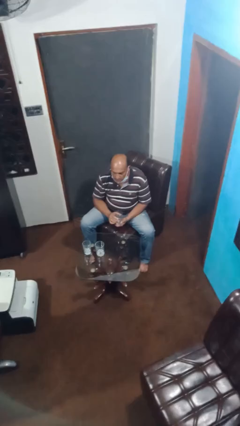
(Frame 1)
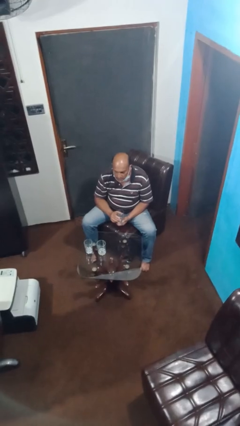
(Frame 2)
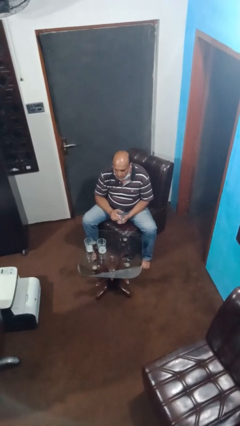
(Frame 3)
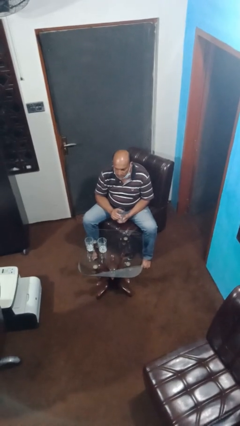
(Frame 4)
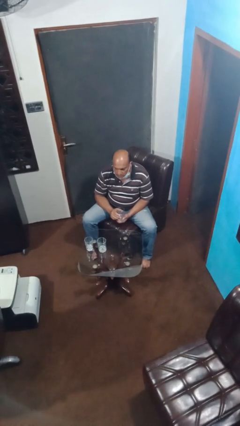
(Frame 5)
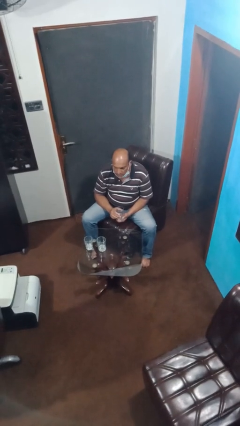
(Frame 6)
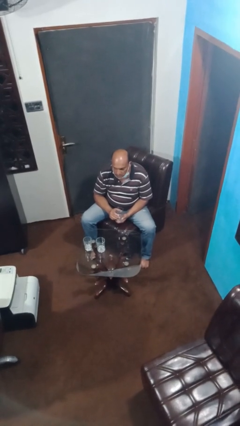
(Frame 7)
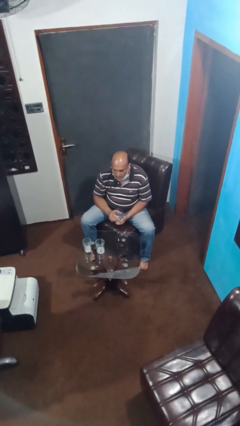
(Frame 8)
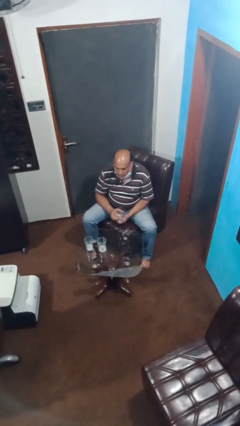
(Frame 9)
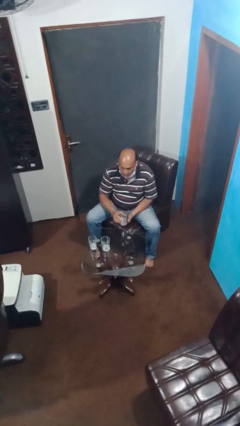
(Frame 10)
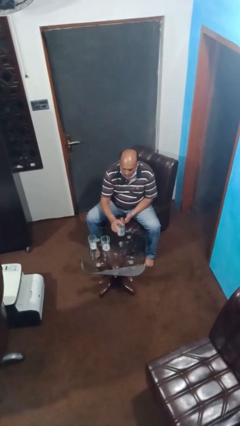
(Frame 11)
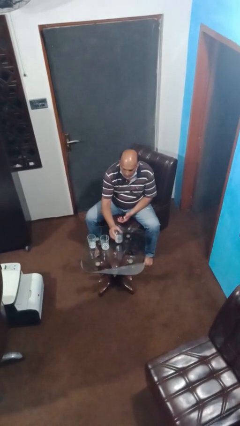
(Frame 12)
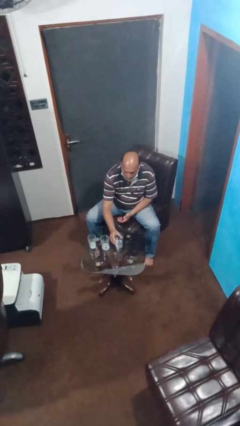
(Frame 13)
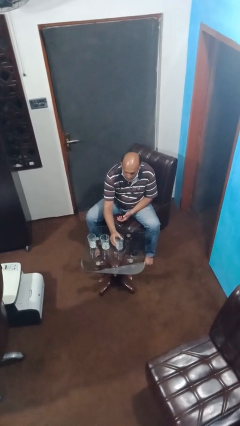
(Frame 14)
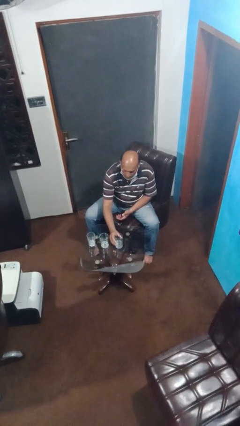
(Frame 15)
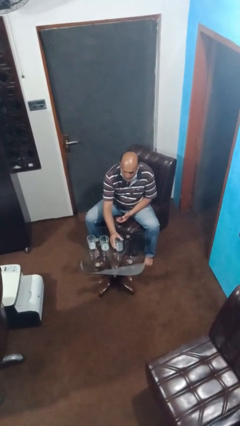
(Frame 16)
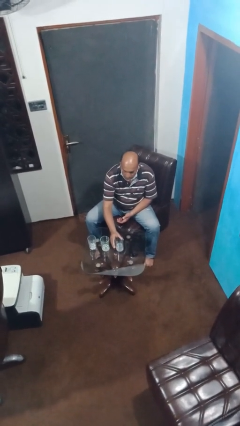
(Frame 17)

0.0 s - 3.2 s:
person puts down object on table

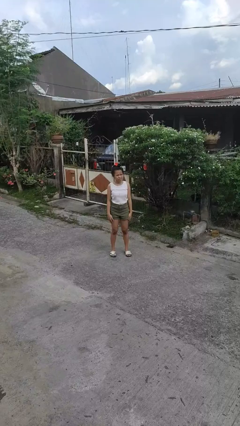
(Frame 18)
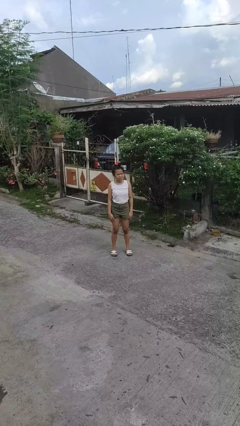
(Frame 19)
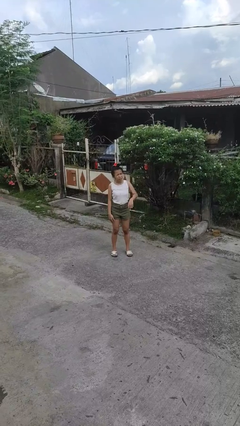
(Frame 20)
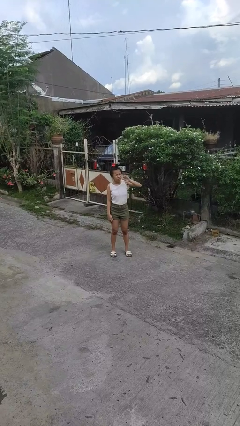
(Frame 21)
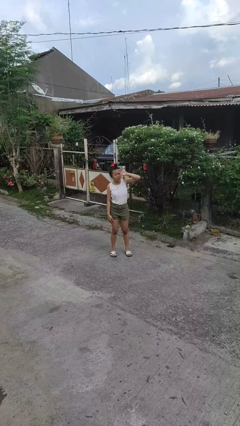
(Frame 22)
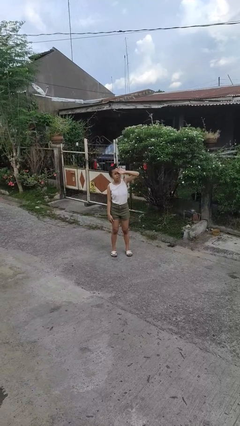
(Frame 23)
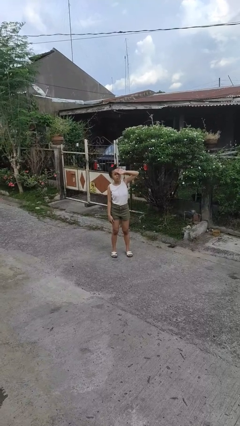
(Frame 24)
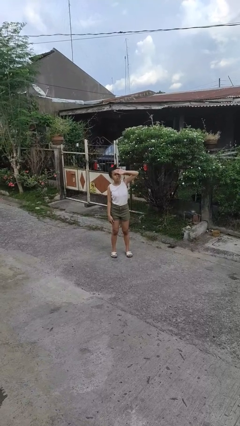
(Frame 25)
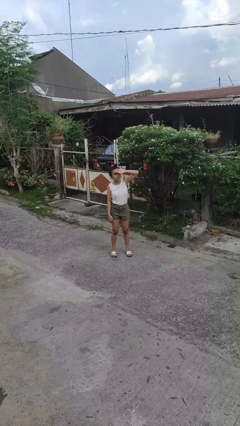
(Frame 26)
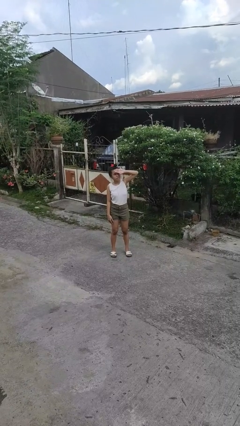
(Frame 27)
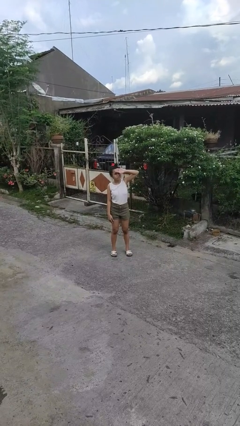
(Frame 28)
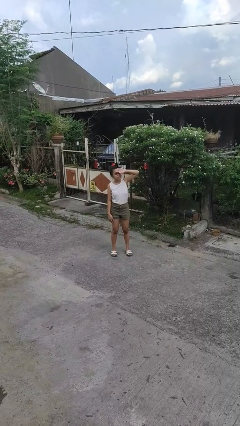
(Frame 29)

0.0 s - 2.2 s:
person shades eyes

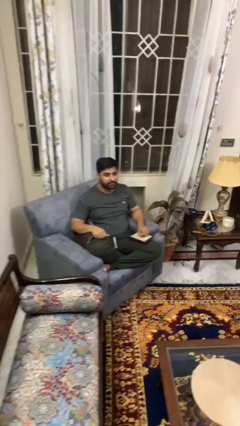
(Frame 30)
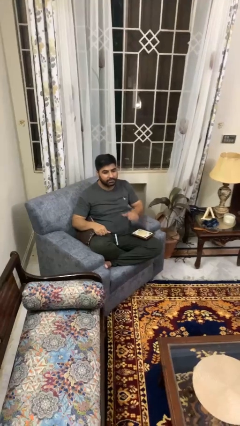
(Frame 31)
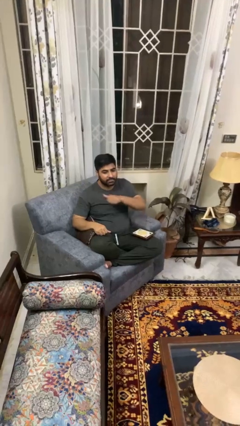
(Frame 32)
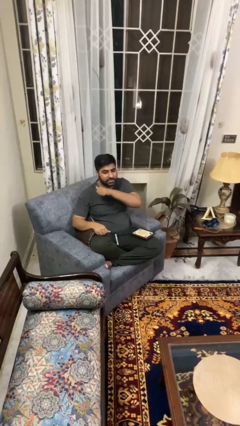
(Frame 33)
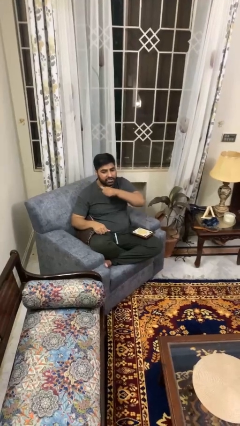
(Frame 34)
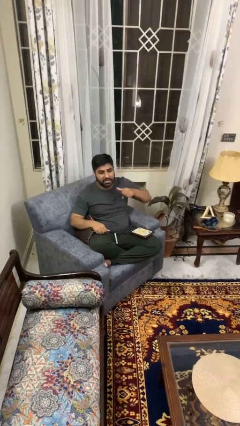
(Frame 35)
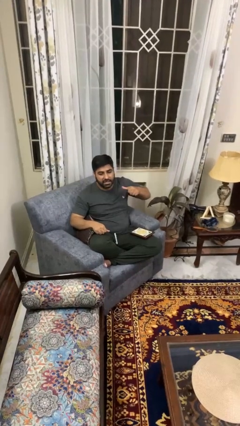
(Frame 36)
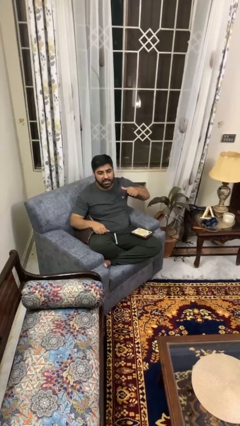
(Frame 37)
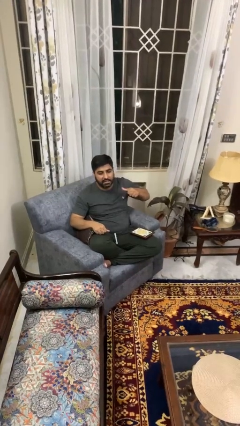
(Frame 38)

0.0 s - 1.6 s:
person gestures cut

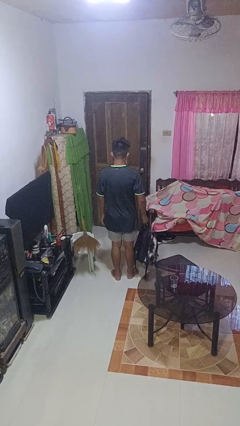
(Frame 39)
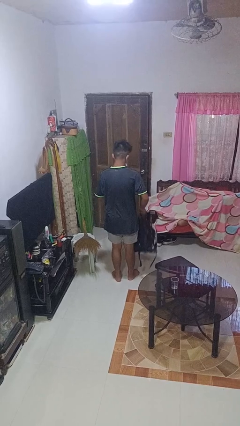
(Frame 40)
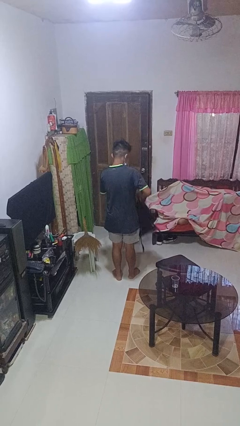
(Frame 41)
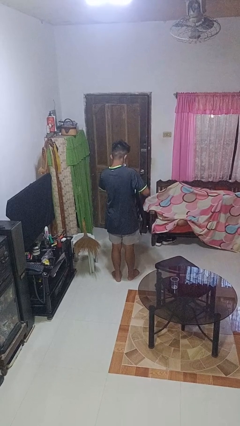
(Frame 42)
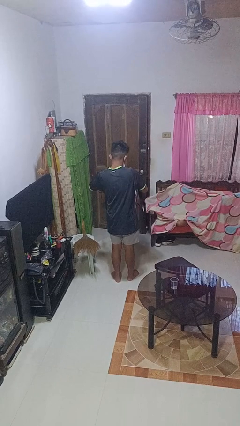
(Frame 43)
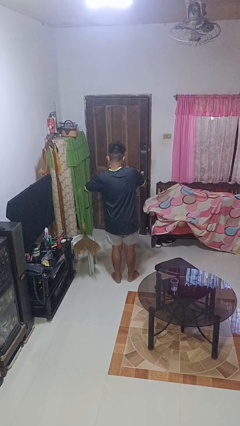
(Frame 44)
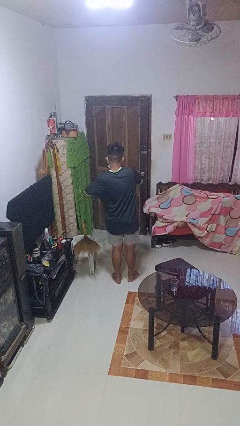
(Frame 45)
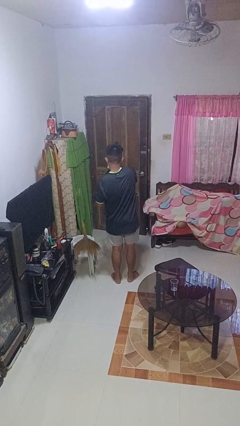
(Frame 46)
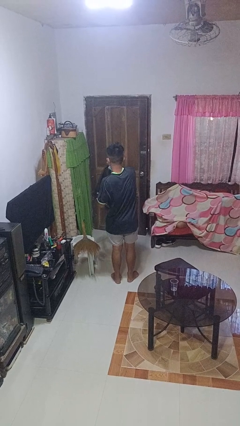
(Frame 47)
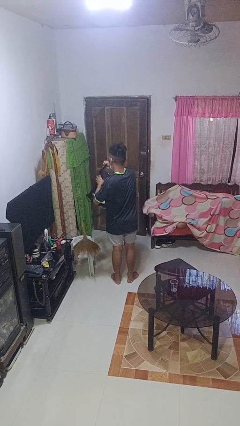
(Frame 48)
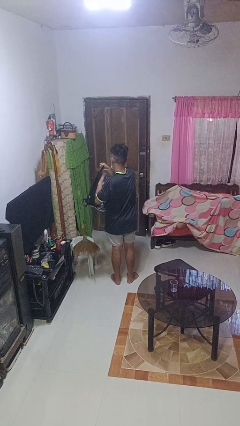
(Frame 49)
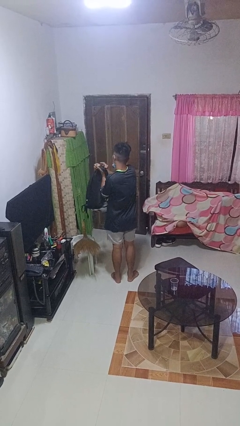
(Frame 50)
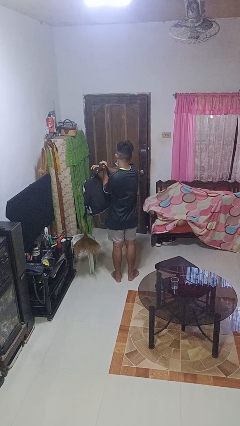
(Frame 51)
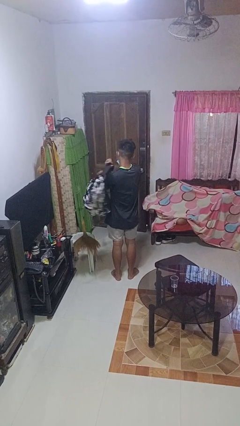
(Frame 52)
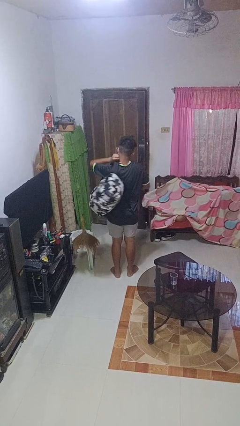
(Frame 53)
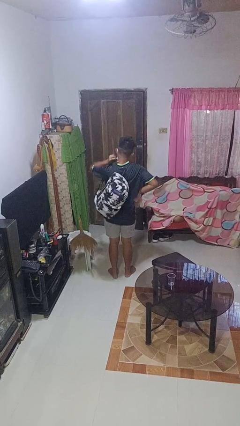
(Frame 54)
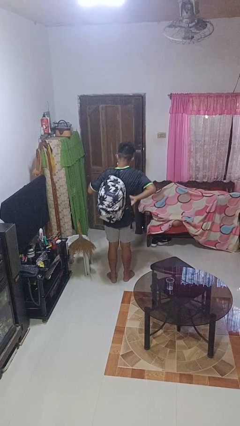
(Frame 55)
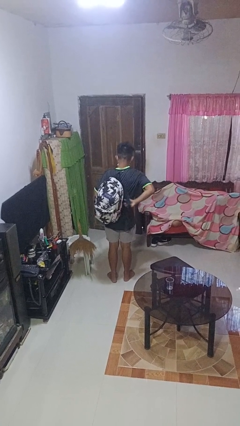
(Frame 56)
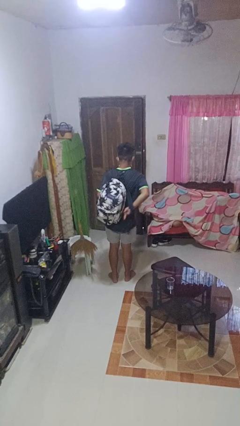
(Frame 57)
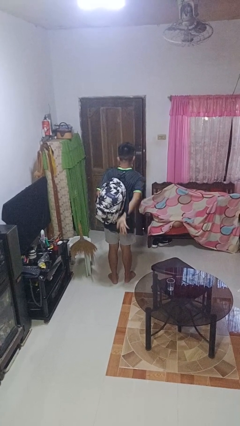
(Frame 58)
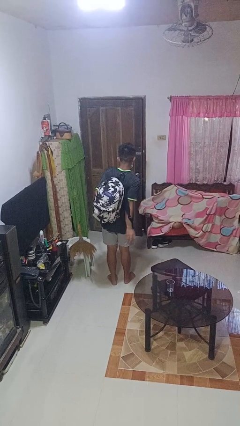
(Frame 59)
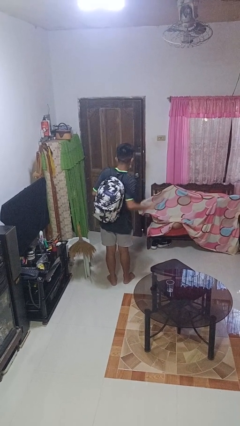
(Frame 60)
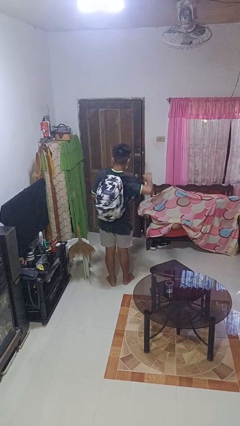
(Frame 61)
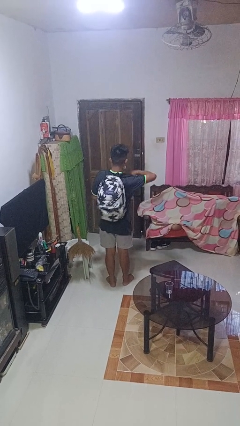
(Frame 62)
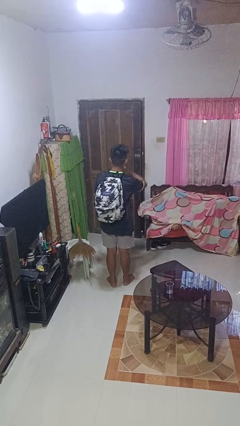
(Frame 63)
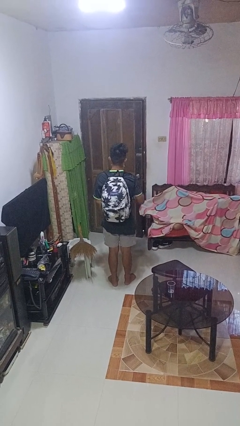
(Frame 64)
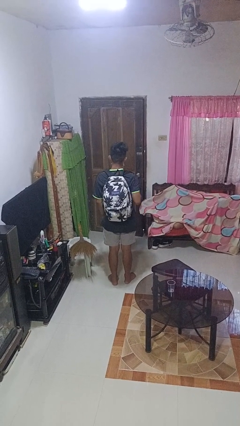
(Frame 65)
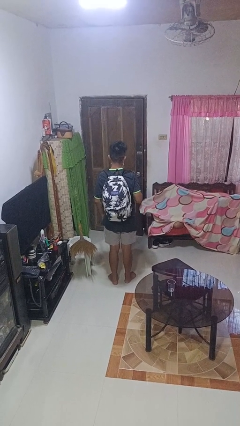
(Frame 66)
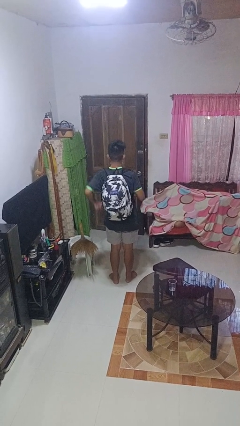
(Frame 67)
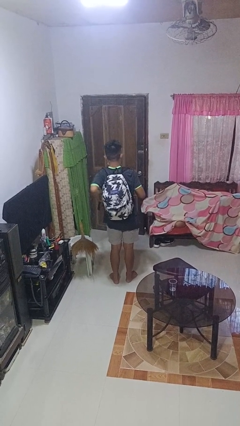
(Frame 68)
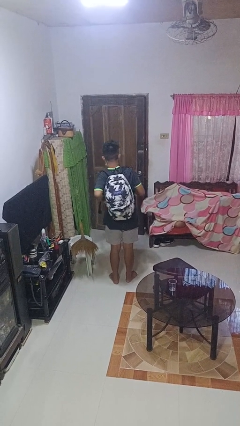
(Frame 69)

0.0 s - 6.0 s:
person puts on backpack

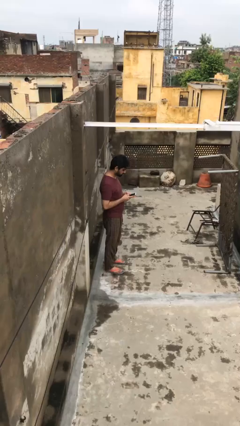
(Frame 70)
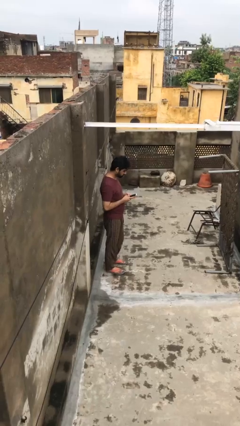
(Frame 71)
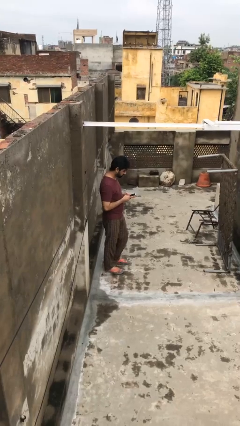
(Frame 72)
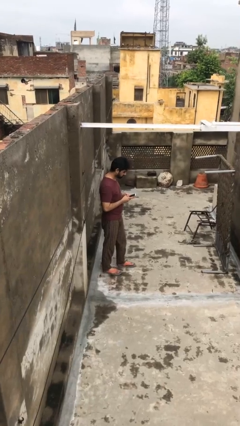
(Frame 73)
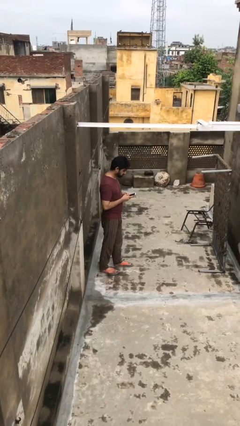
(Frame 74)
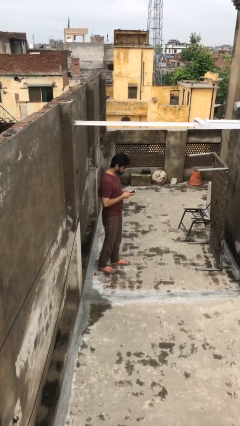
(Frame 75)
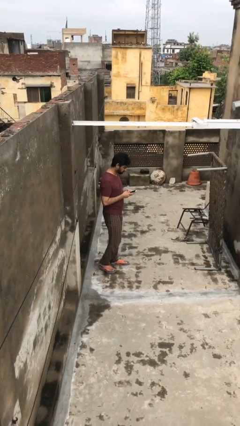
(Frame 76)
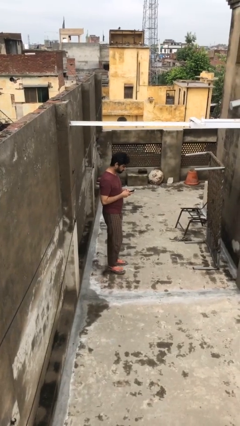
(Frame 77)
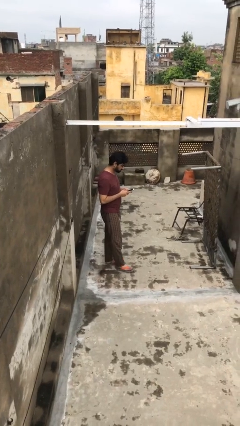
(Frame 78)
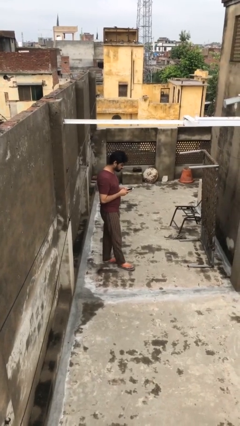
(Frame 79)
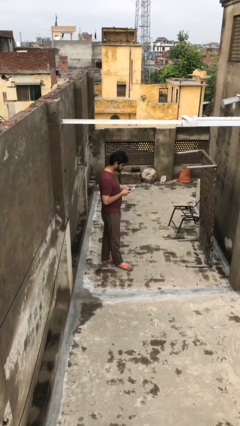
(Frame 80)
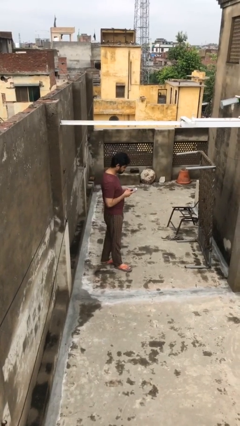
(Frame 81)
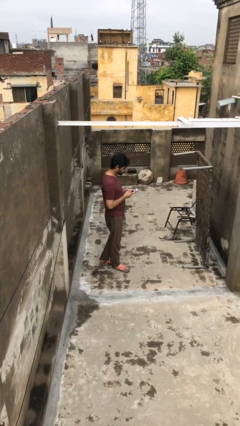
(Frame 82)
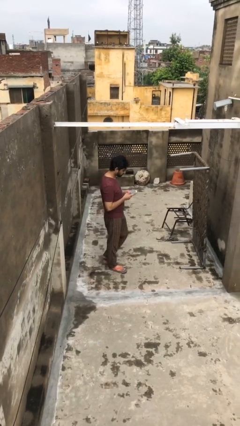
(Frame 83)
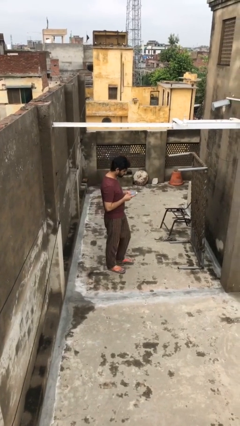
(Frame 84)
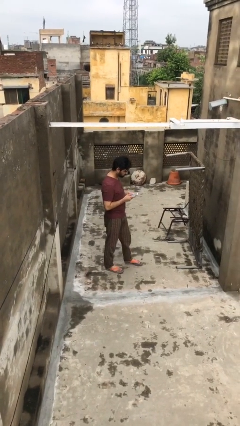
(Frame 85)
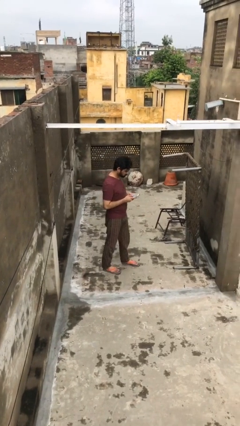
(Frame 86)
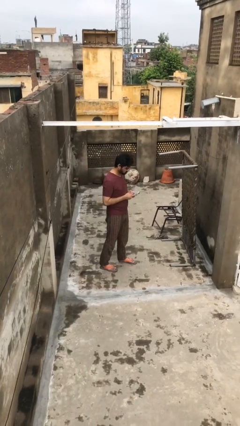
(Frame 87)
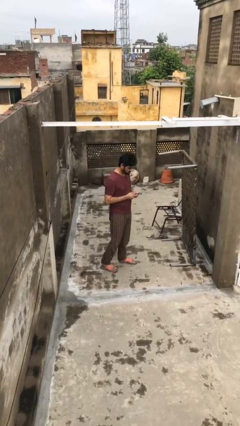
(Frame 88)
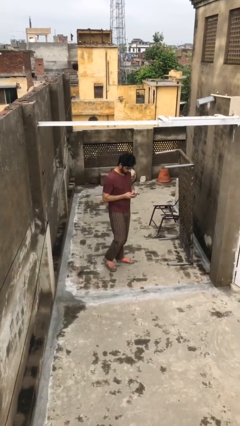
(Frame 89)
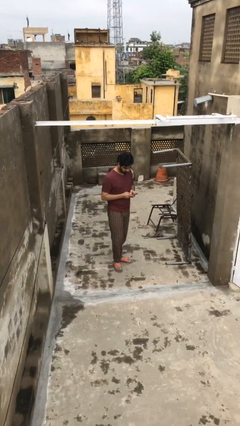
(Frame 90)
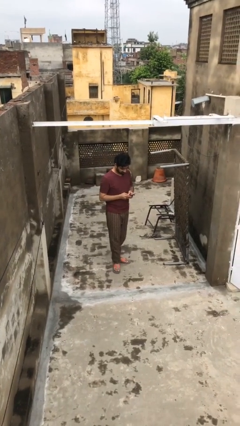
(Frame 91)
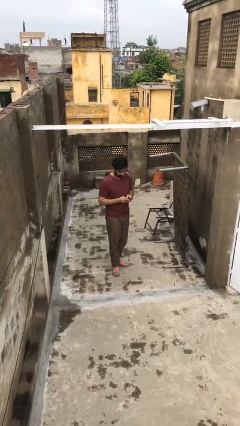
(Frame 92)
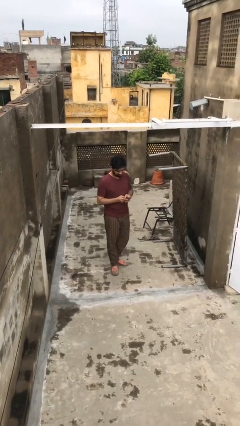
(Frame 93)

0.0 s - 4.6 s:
person texts on phone
